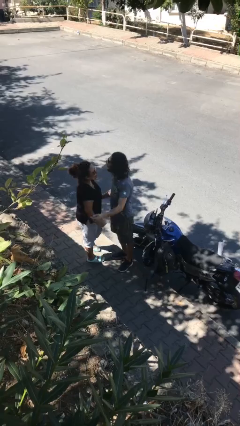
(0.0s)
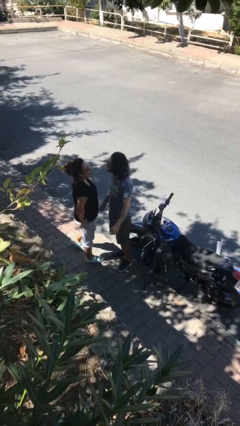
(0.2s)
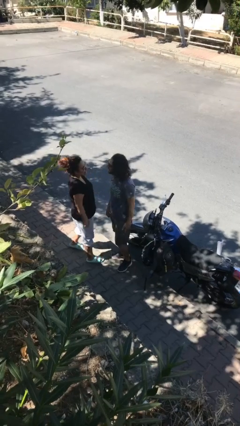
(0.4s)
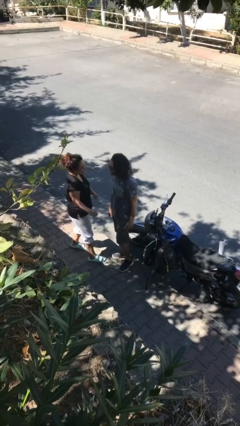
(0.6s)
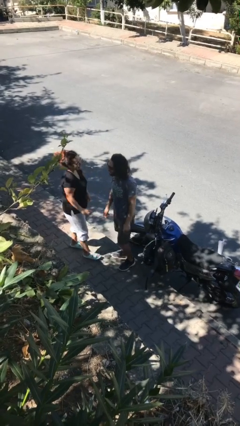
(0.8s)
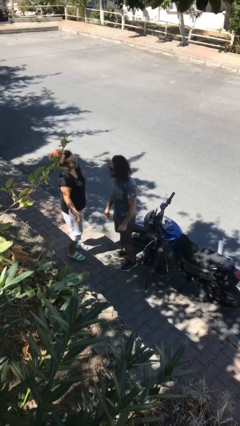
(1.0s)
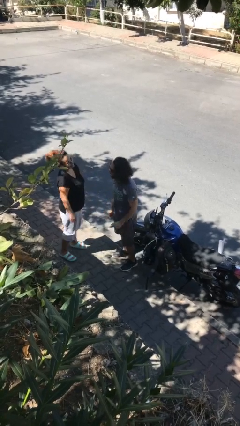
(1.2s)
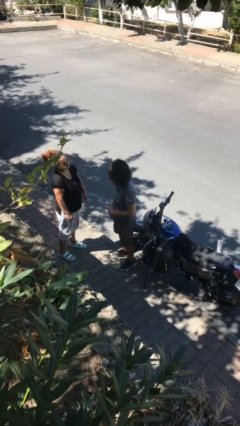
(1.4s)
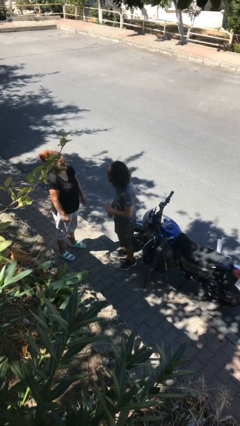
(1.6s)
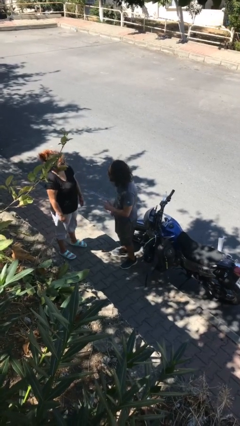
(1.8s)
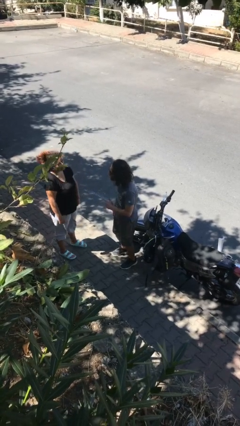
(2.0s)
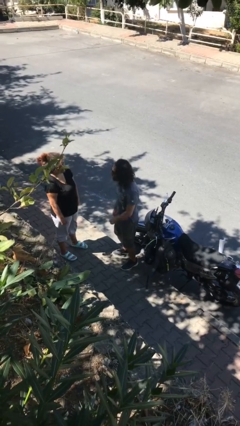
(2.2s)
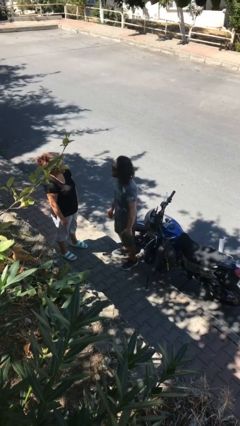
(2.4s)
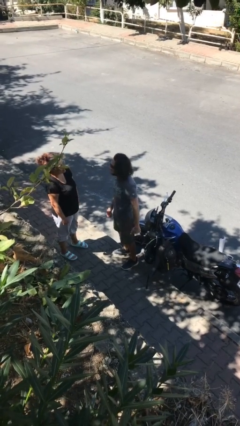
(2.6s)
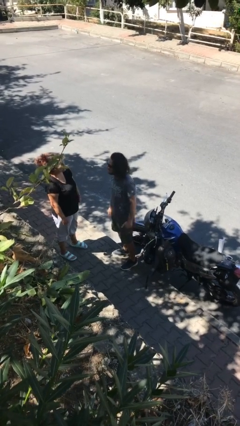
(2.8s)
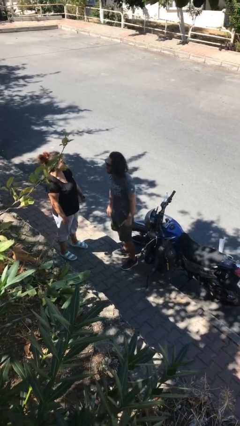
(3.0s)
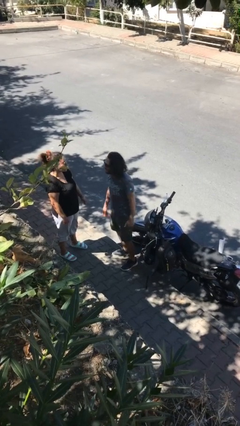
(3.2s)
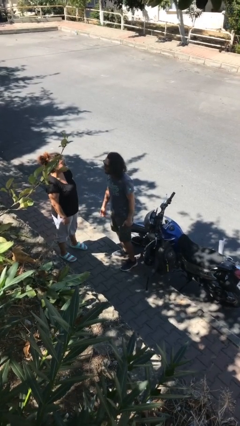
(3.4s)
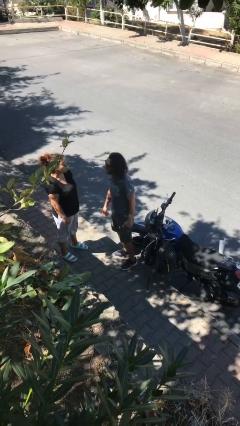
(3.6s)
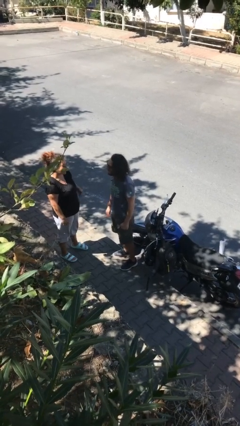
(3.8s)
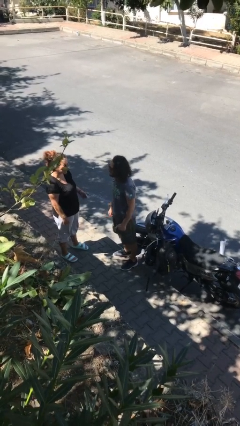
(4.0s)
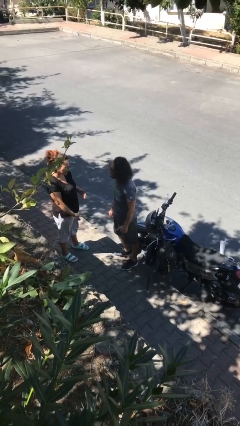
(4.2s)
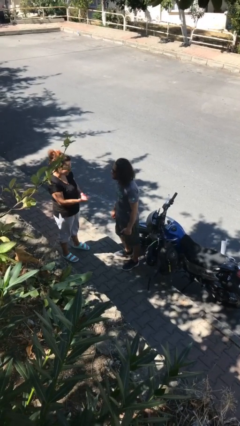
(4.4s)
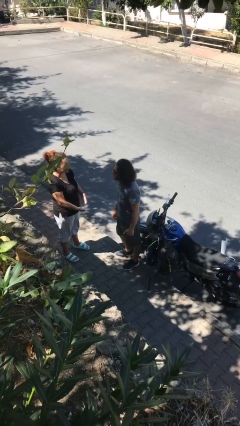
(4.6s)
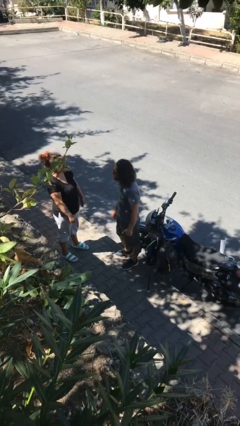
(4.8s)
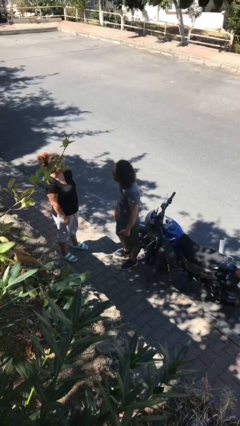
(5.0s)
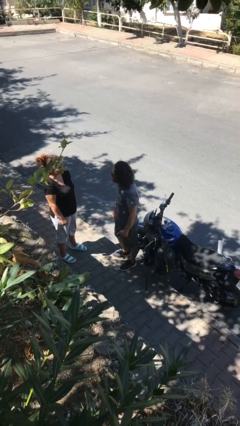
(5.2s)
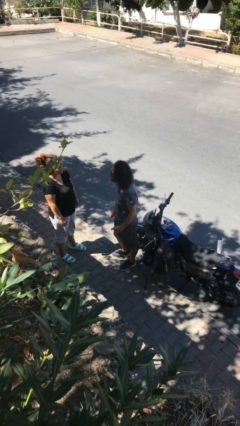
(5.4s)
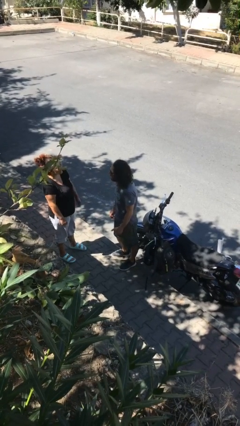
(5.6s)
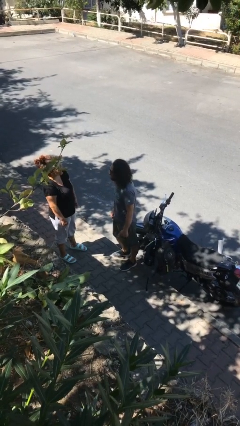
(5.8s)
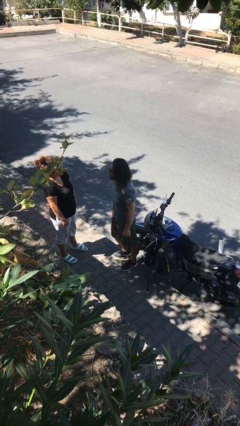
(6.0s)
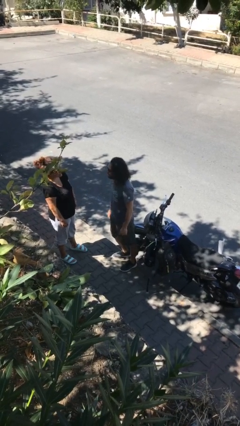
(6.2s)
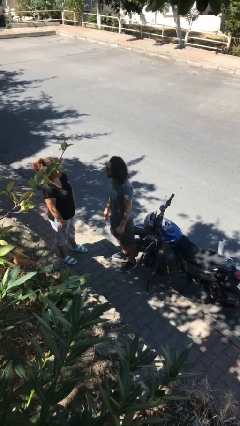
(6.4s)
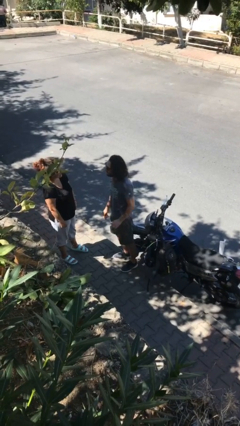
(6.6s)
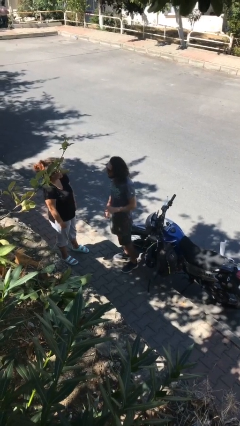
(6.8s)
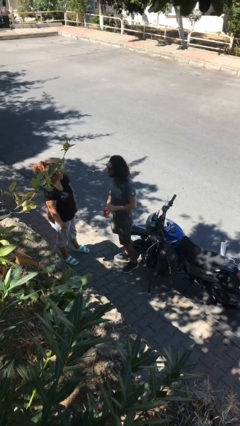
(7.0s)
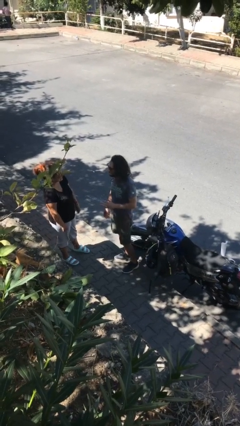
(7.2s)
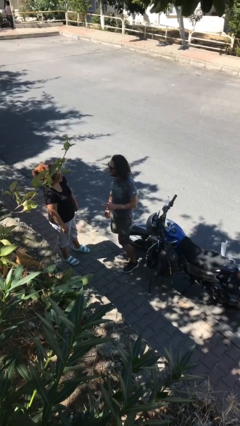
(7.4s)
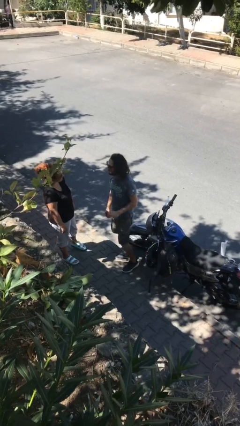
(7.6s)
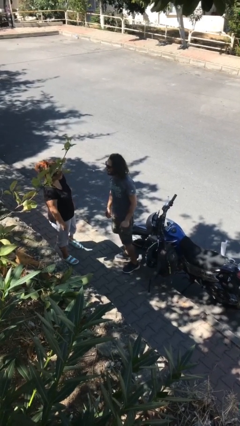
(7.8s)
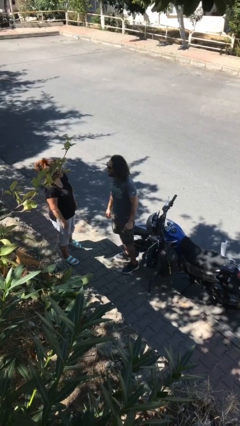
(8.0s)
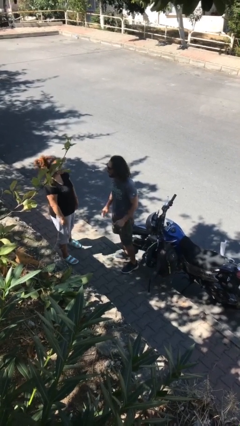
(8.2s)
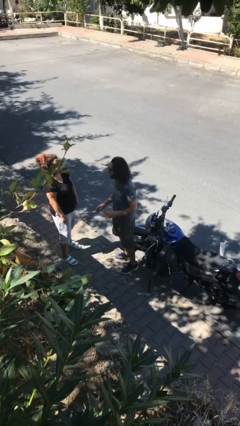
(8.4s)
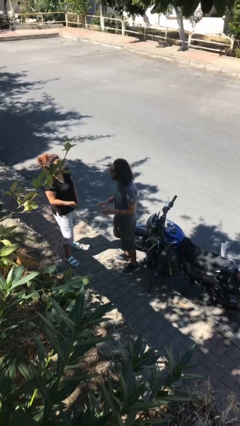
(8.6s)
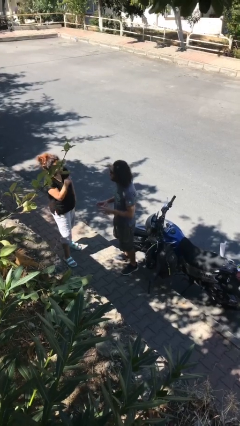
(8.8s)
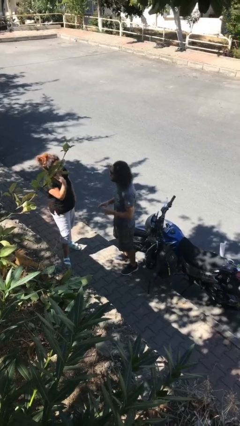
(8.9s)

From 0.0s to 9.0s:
person talks to person

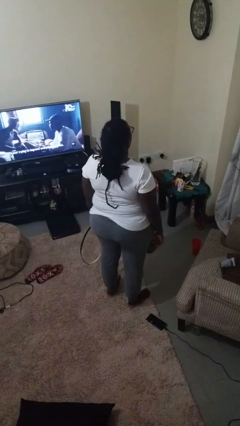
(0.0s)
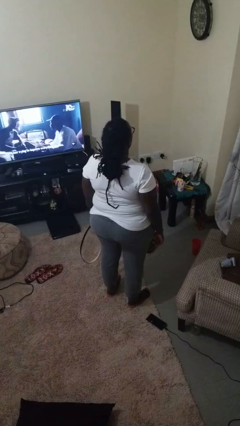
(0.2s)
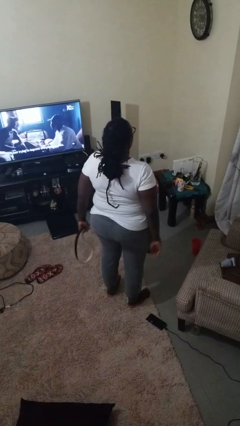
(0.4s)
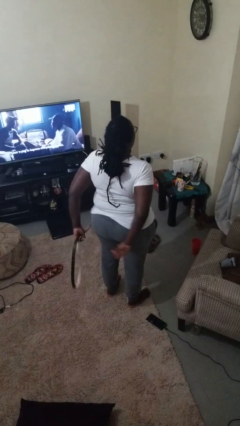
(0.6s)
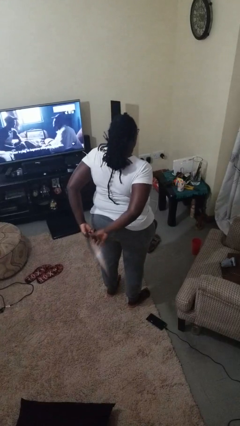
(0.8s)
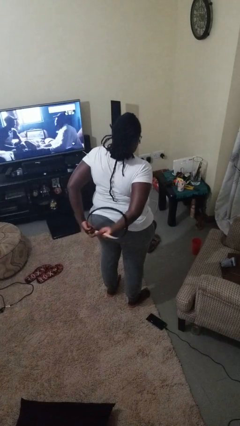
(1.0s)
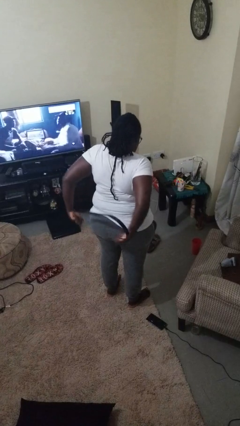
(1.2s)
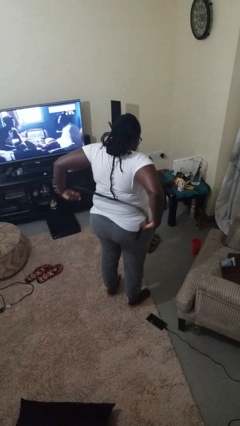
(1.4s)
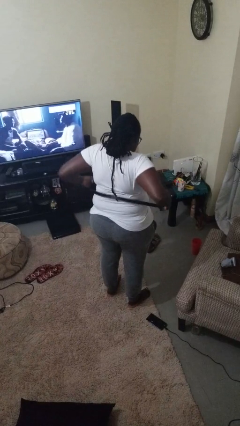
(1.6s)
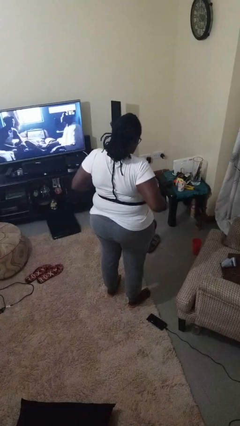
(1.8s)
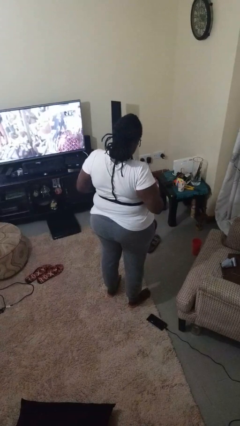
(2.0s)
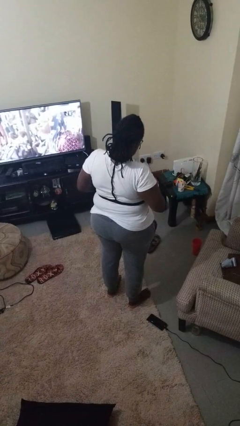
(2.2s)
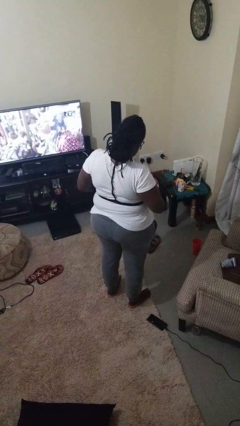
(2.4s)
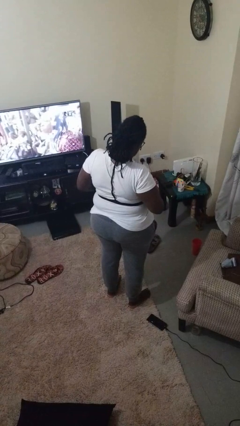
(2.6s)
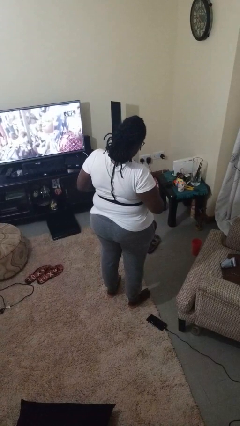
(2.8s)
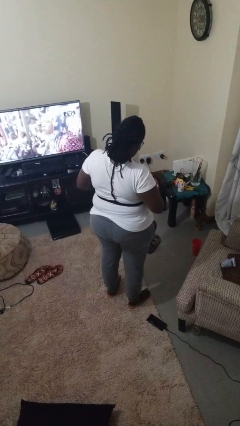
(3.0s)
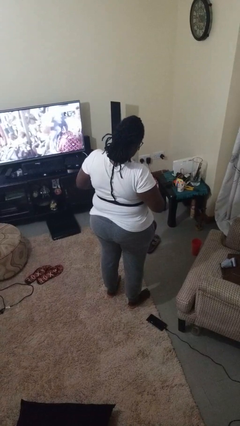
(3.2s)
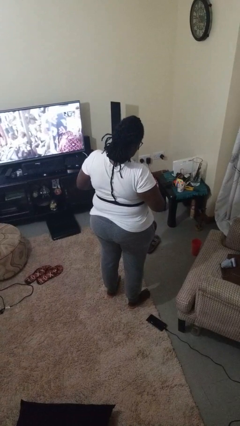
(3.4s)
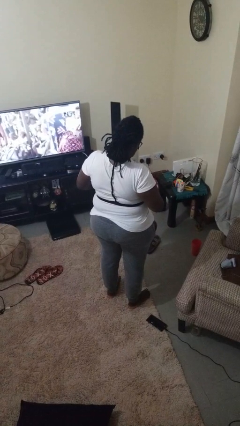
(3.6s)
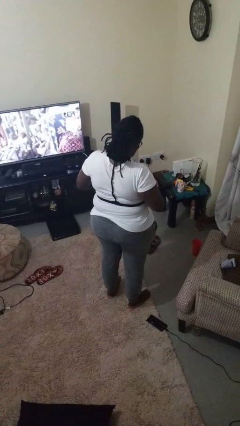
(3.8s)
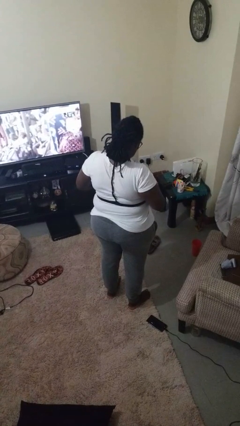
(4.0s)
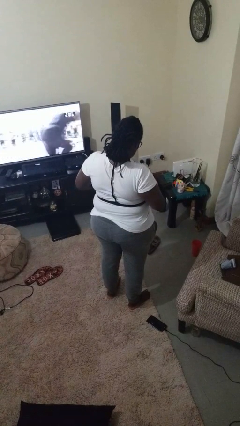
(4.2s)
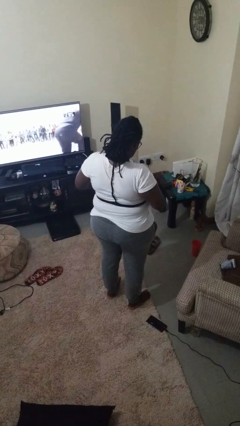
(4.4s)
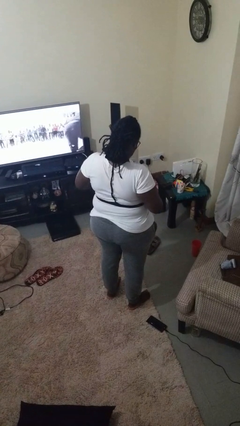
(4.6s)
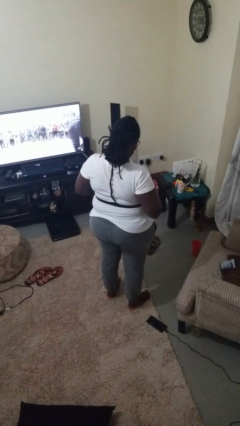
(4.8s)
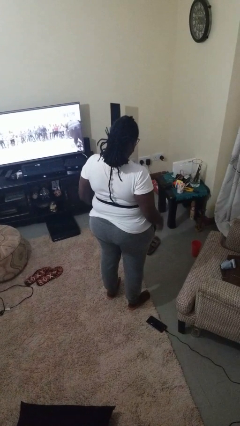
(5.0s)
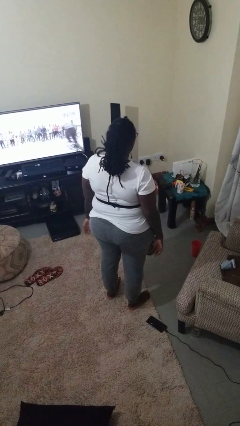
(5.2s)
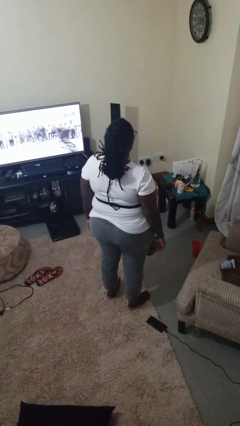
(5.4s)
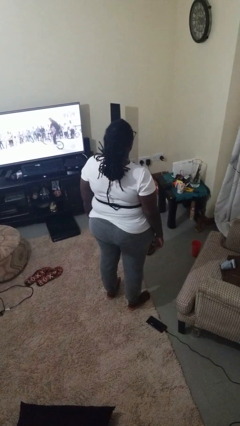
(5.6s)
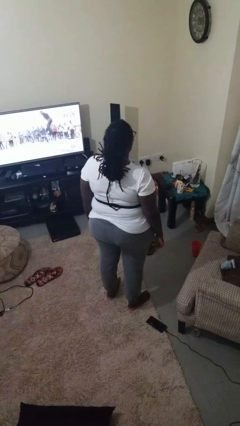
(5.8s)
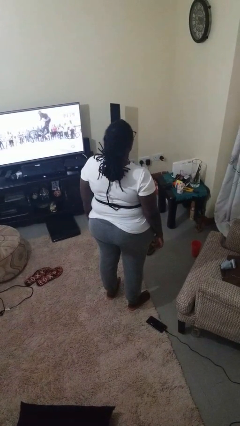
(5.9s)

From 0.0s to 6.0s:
person puts on belt

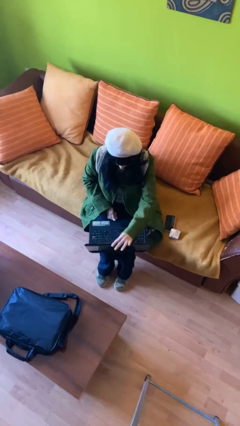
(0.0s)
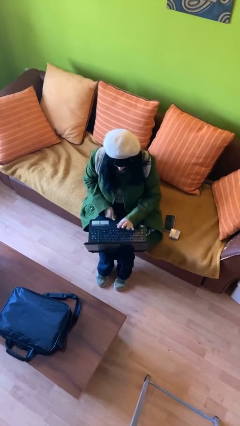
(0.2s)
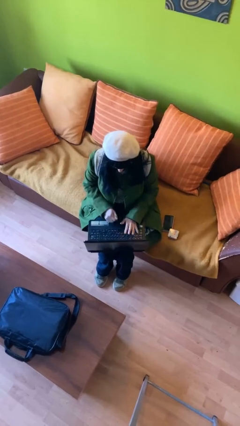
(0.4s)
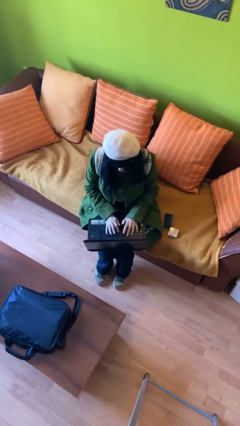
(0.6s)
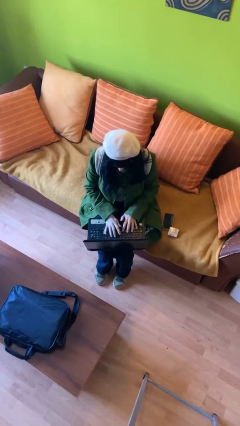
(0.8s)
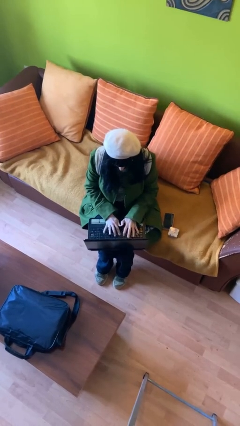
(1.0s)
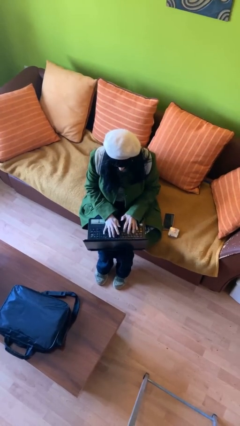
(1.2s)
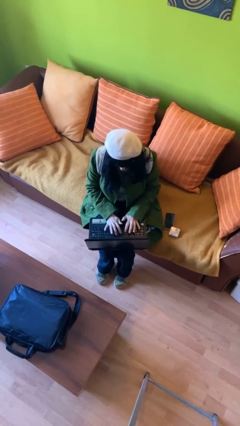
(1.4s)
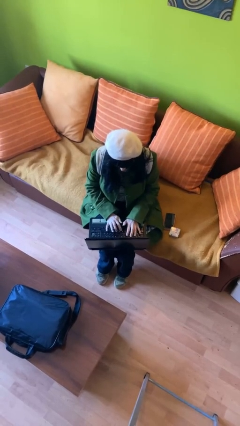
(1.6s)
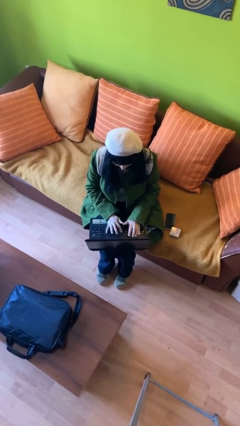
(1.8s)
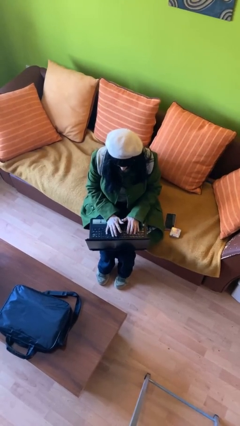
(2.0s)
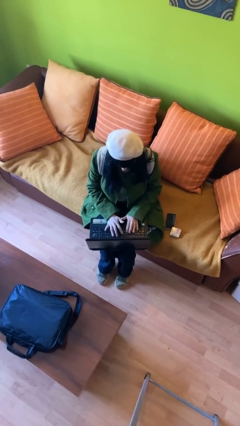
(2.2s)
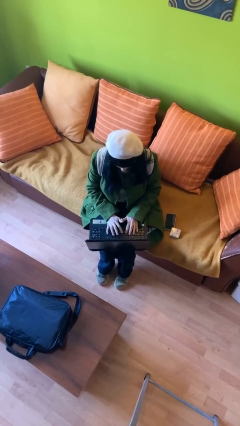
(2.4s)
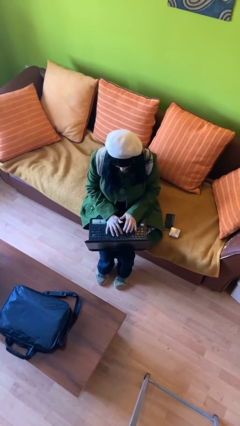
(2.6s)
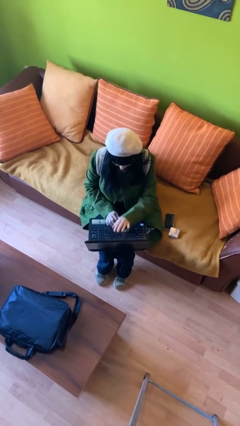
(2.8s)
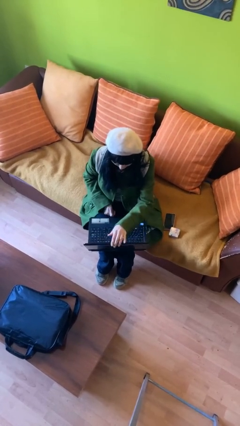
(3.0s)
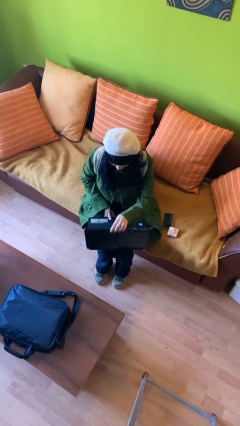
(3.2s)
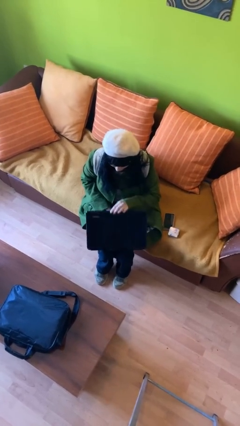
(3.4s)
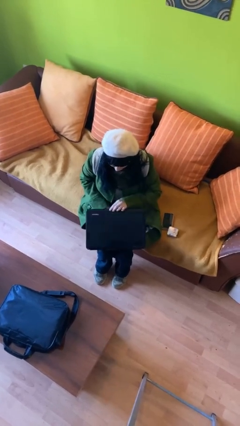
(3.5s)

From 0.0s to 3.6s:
person interacts with laptop
